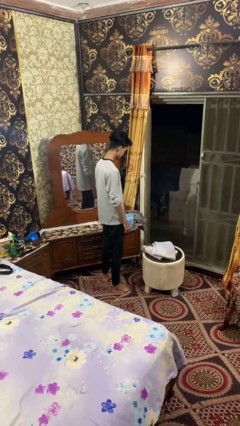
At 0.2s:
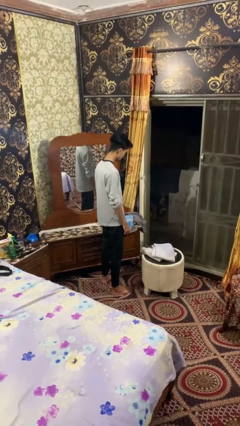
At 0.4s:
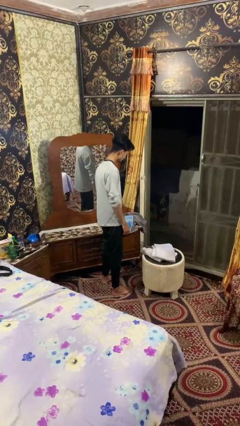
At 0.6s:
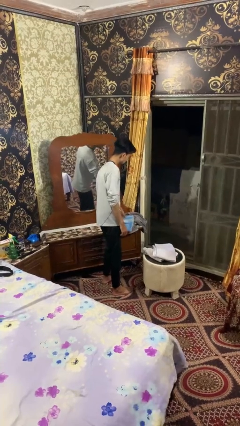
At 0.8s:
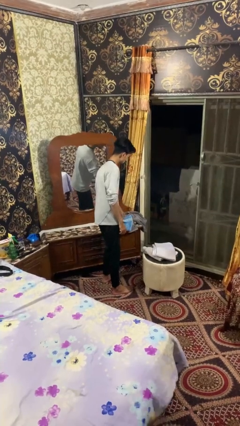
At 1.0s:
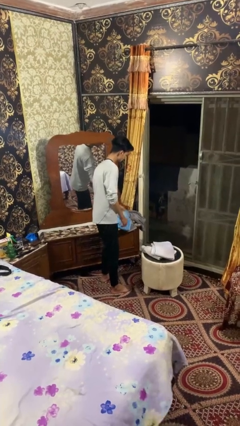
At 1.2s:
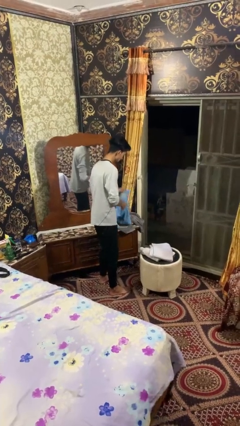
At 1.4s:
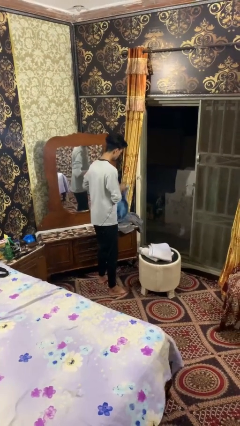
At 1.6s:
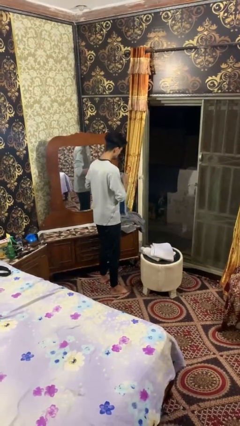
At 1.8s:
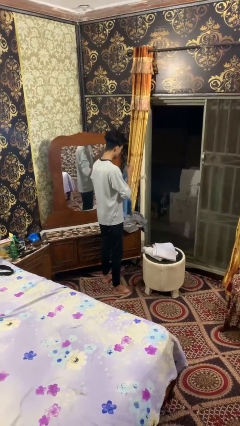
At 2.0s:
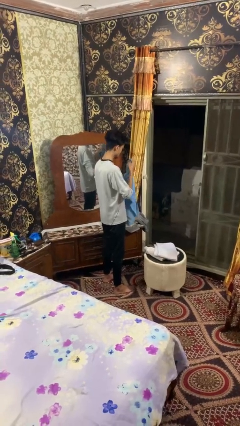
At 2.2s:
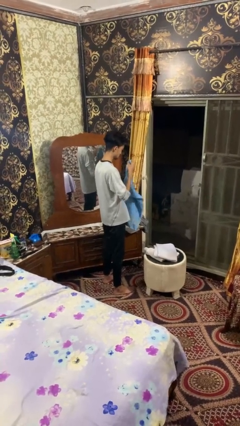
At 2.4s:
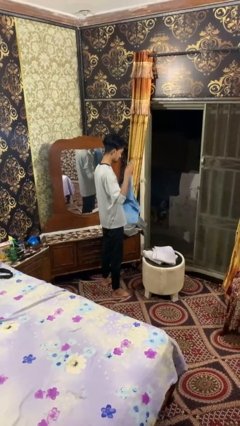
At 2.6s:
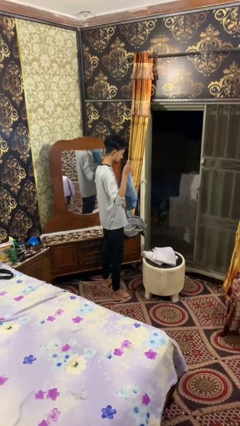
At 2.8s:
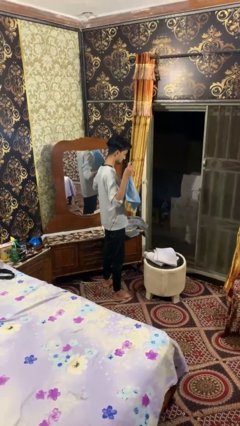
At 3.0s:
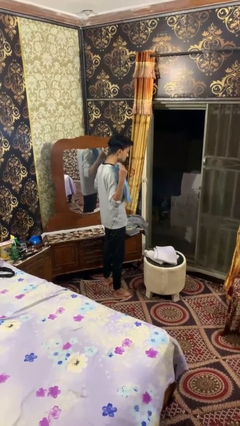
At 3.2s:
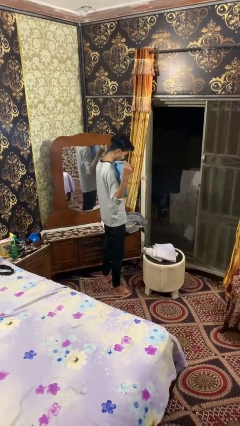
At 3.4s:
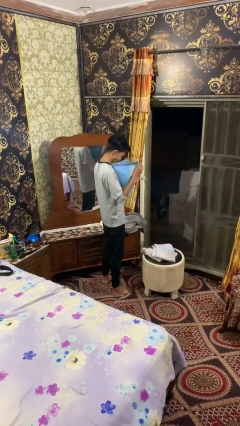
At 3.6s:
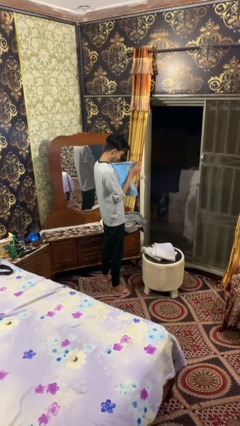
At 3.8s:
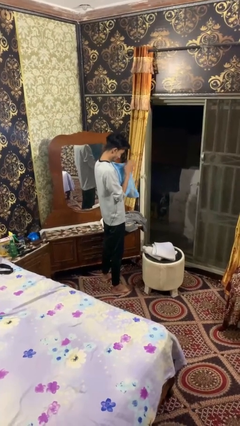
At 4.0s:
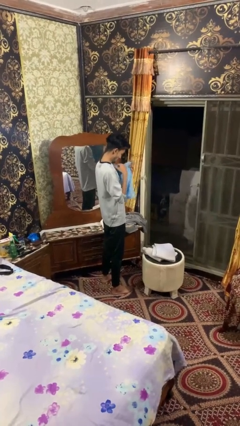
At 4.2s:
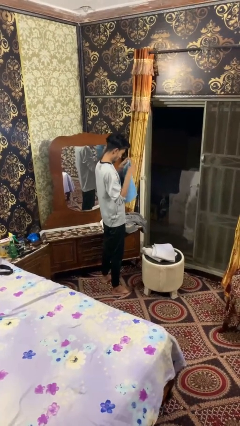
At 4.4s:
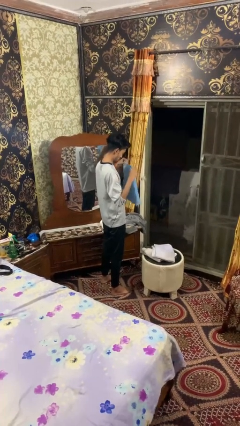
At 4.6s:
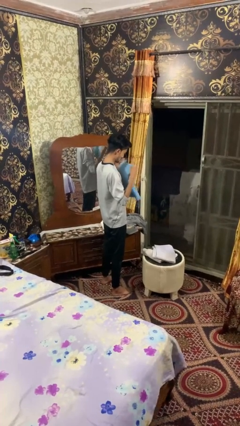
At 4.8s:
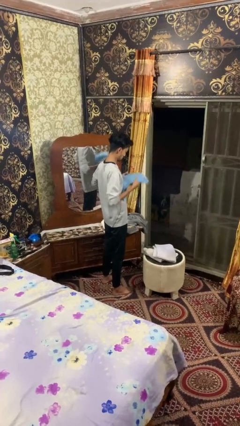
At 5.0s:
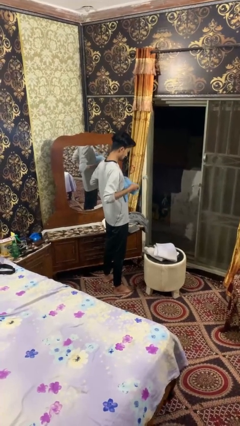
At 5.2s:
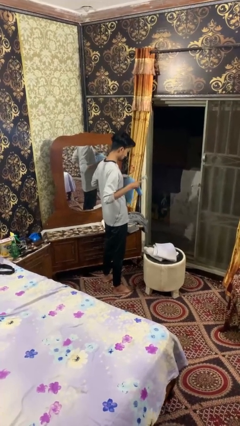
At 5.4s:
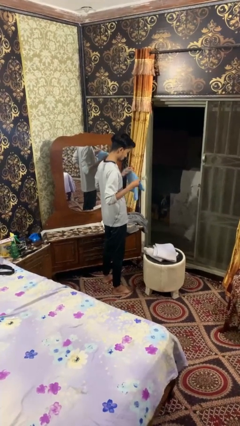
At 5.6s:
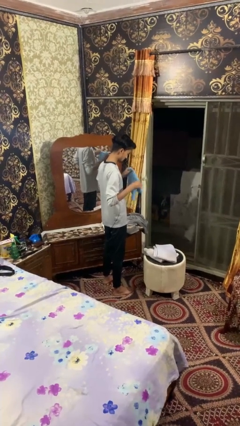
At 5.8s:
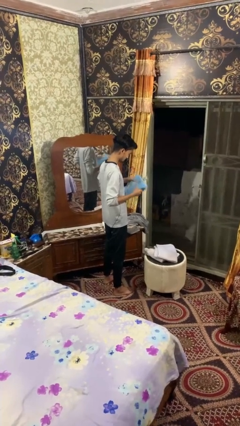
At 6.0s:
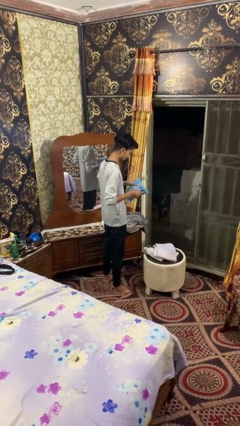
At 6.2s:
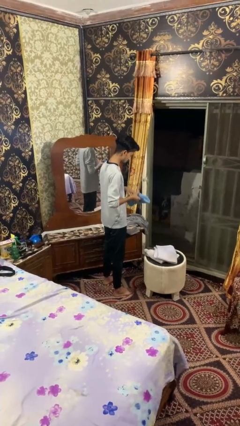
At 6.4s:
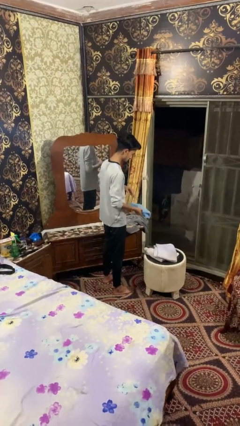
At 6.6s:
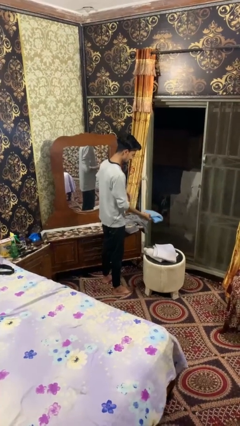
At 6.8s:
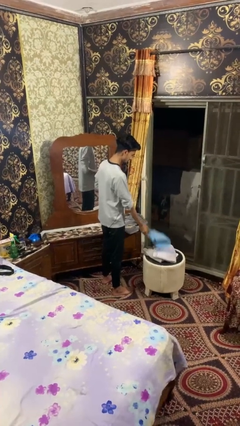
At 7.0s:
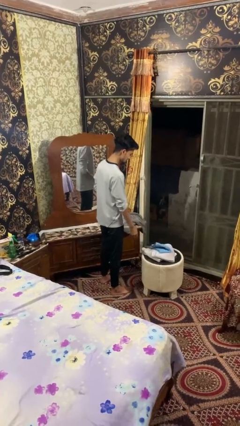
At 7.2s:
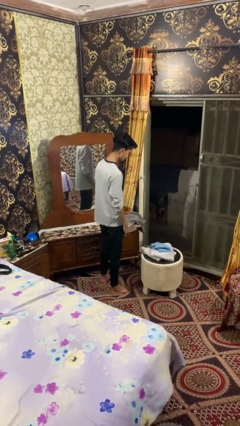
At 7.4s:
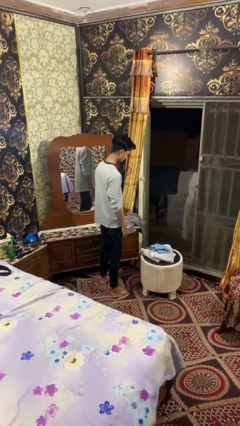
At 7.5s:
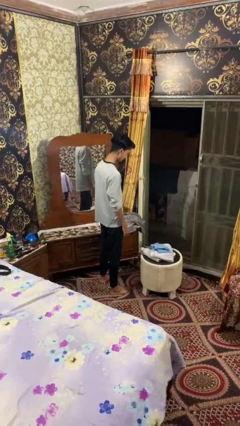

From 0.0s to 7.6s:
person folds towel

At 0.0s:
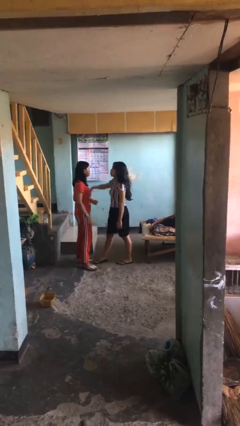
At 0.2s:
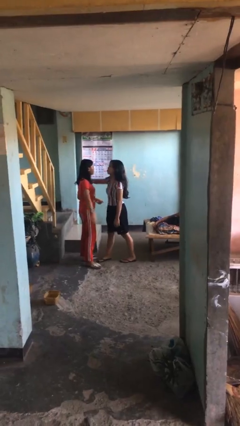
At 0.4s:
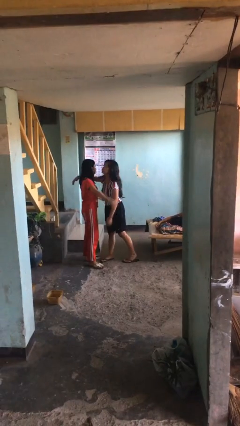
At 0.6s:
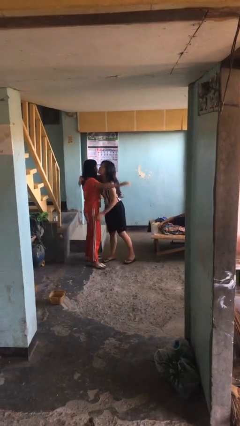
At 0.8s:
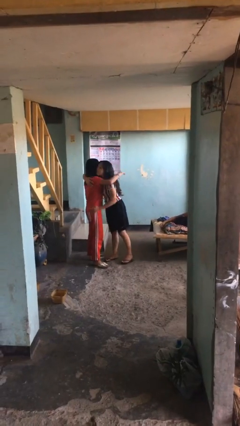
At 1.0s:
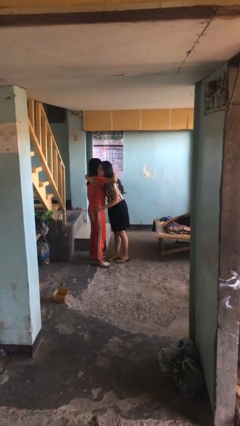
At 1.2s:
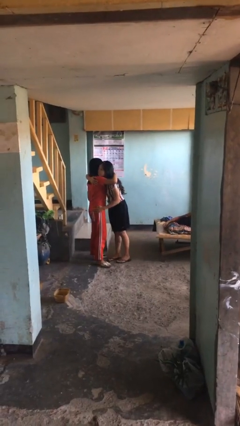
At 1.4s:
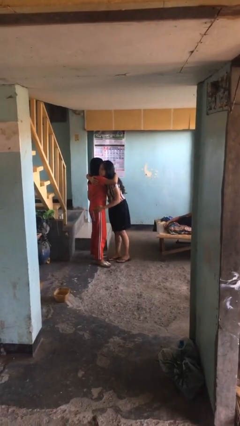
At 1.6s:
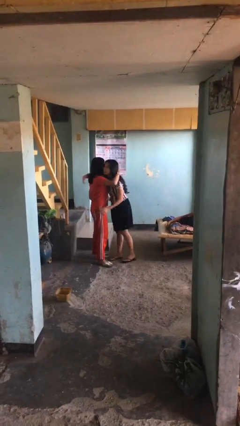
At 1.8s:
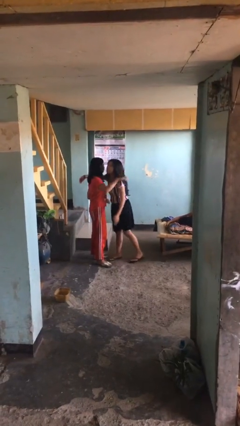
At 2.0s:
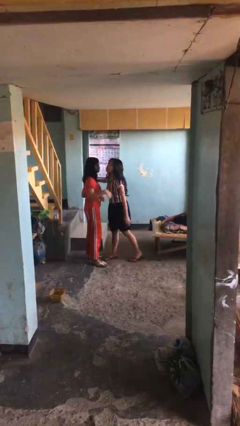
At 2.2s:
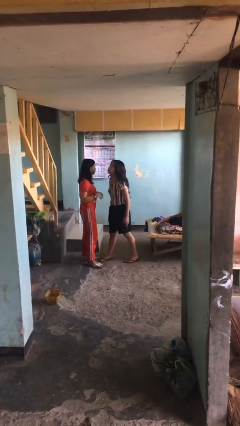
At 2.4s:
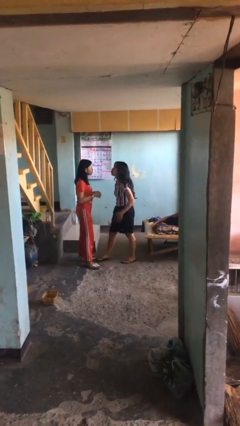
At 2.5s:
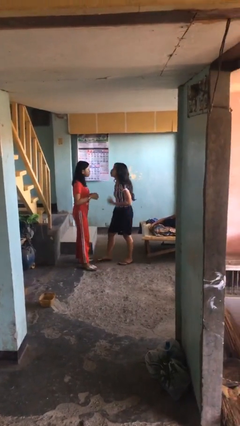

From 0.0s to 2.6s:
person embraces person

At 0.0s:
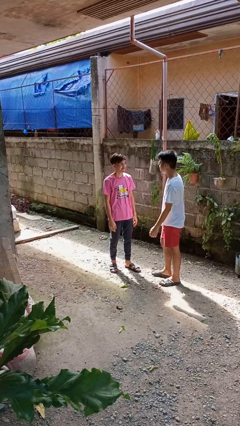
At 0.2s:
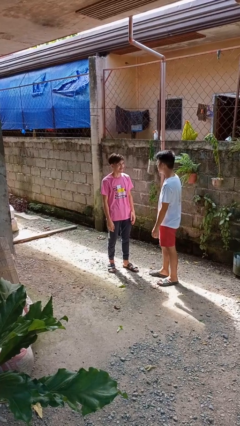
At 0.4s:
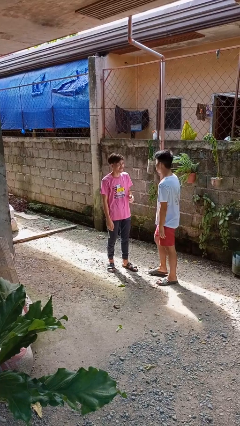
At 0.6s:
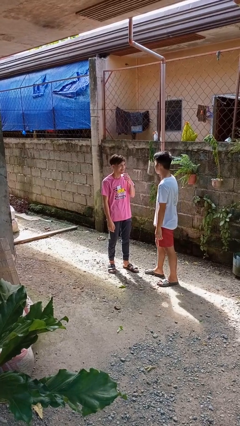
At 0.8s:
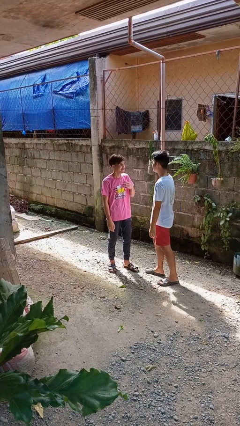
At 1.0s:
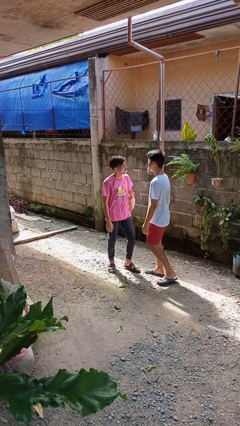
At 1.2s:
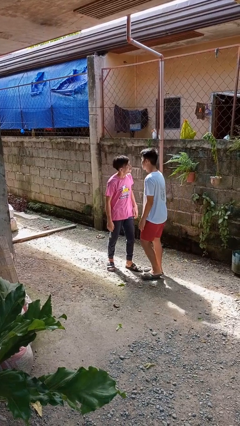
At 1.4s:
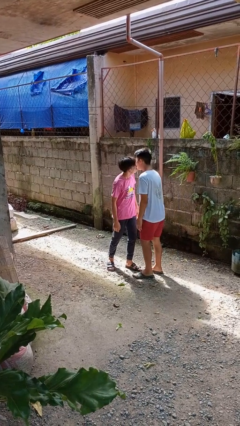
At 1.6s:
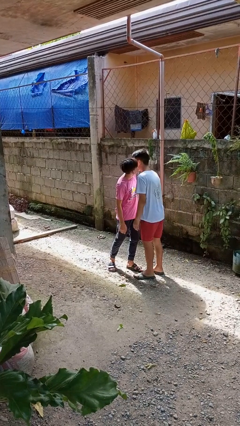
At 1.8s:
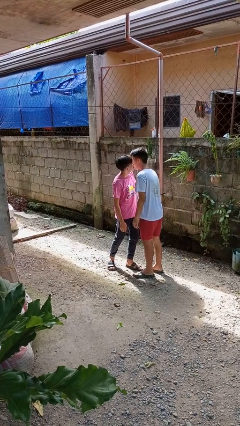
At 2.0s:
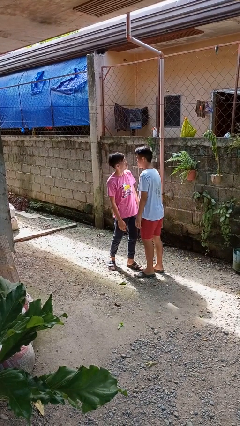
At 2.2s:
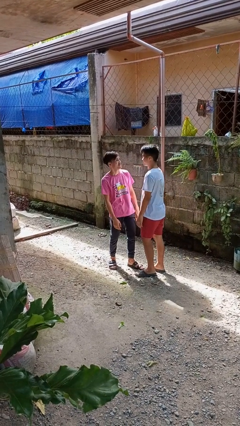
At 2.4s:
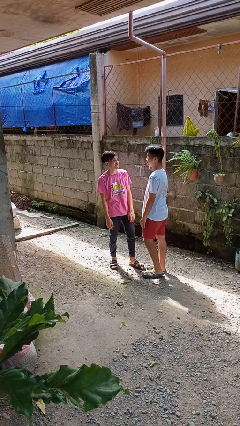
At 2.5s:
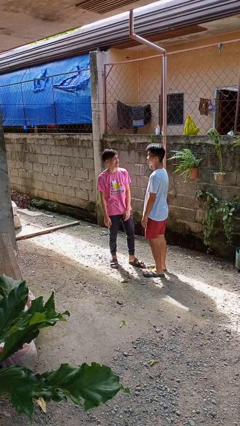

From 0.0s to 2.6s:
person kisses cheek of person

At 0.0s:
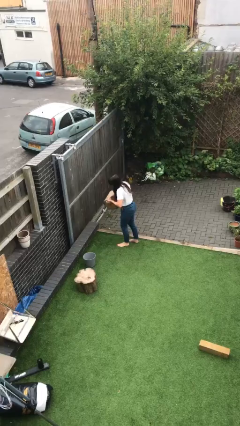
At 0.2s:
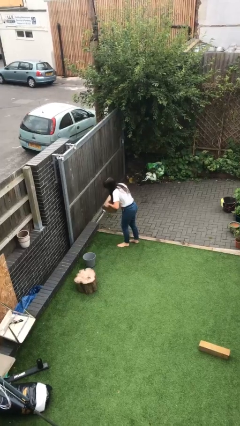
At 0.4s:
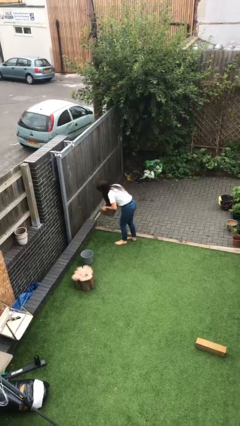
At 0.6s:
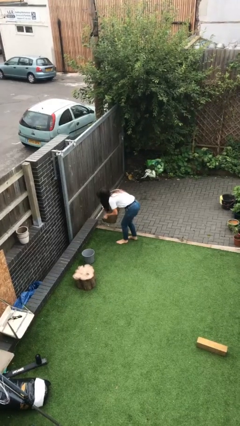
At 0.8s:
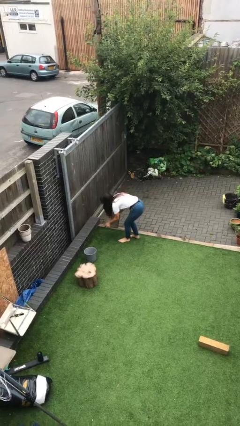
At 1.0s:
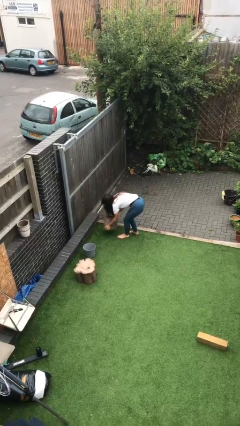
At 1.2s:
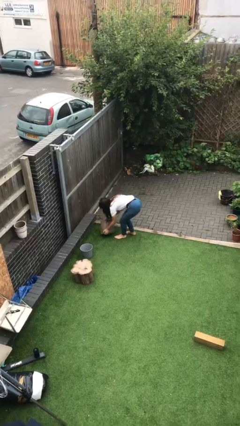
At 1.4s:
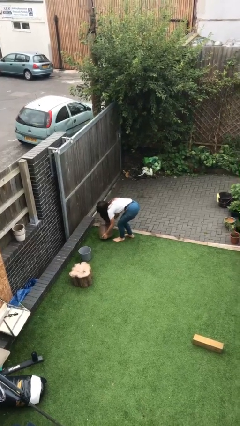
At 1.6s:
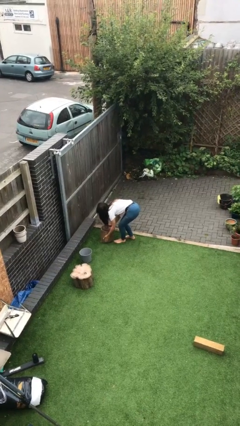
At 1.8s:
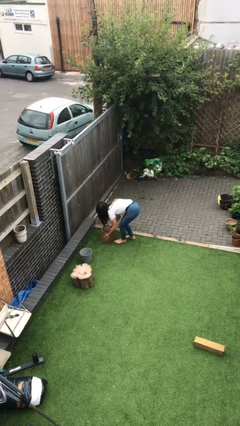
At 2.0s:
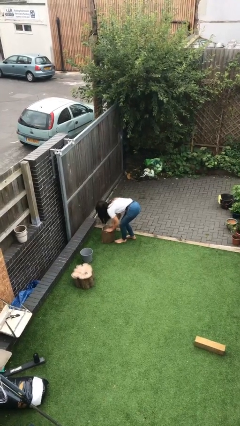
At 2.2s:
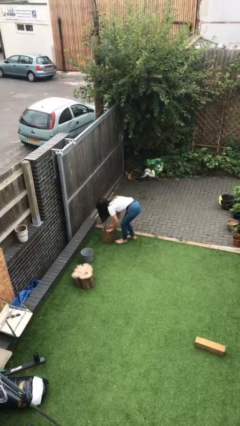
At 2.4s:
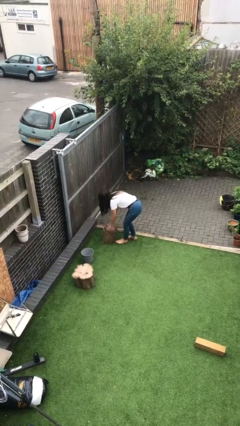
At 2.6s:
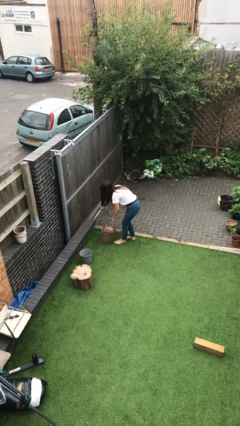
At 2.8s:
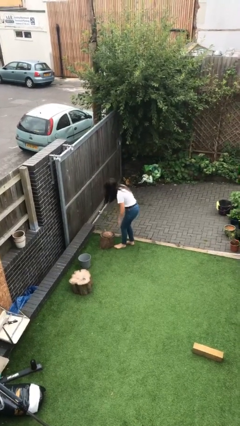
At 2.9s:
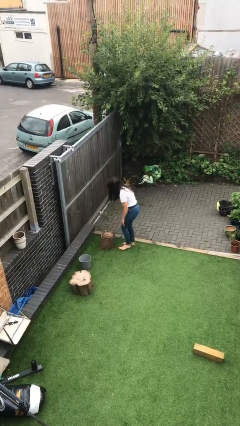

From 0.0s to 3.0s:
person puts down object on floor

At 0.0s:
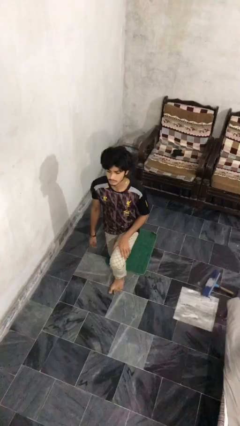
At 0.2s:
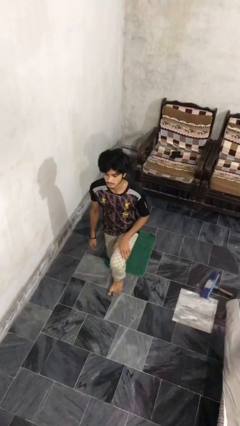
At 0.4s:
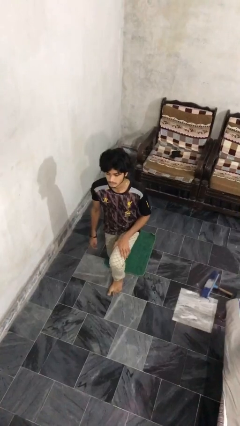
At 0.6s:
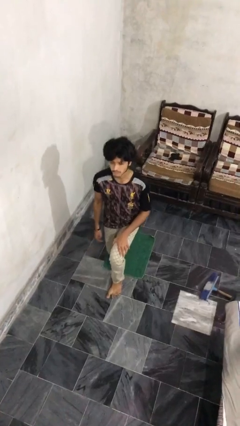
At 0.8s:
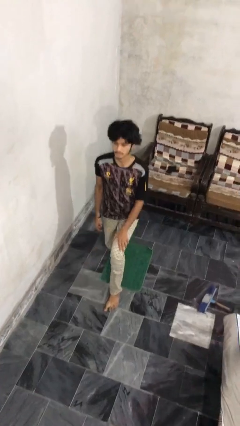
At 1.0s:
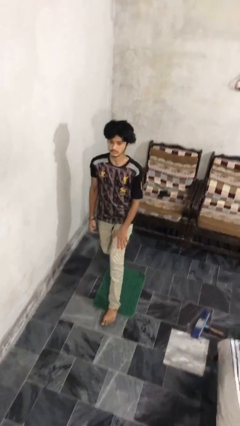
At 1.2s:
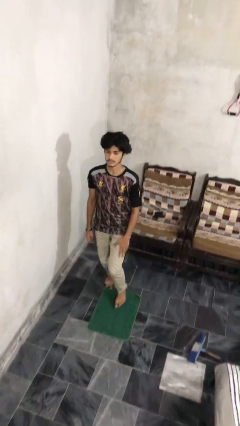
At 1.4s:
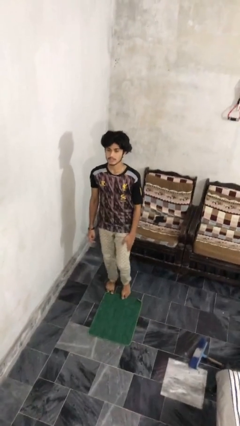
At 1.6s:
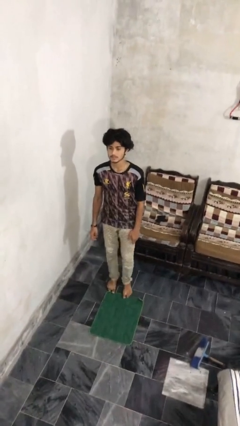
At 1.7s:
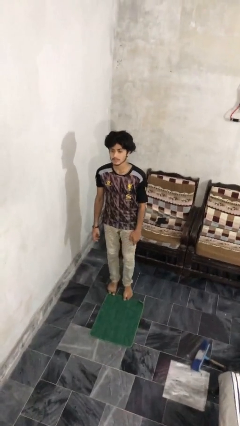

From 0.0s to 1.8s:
person stands up from floor
